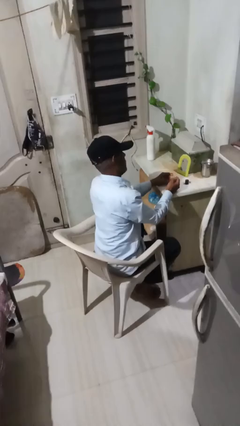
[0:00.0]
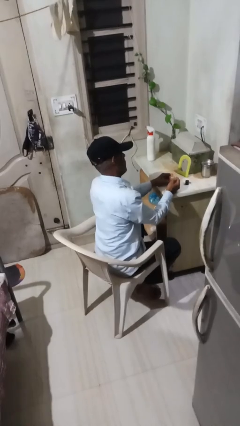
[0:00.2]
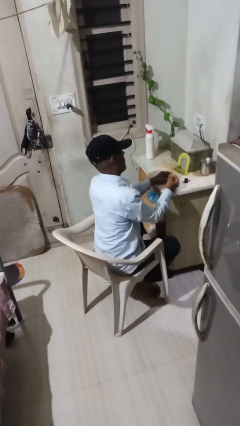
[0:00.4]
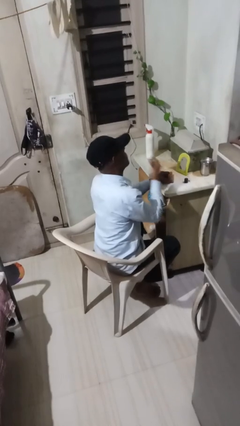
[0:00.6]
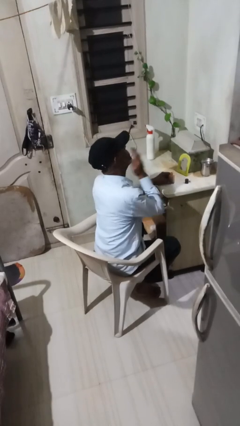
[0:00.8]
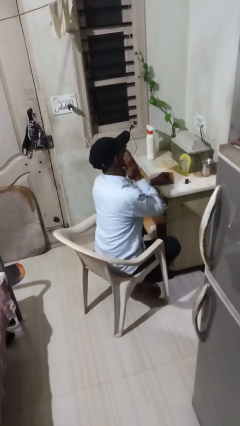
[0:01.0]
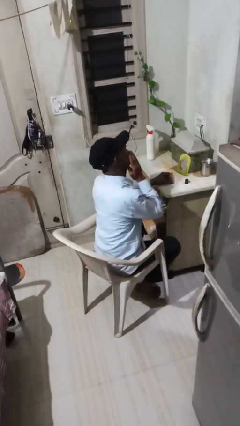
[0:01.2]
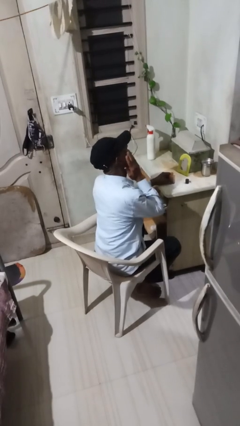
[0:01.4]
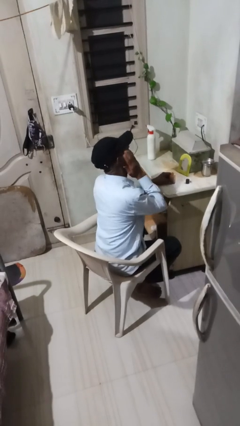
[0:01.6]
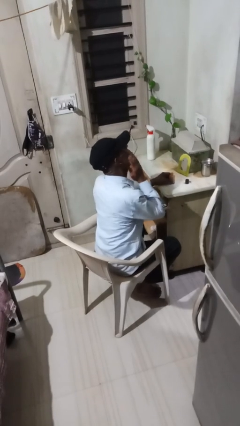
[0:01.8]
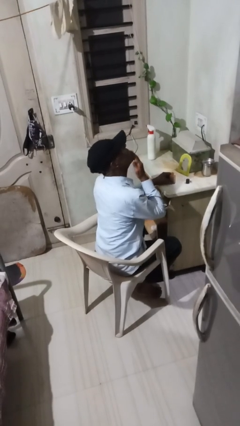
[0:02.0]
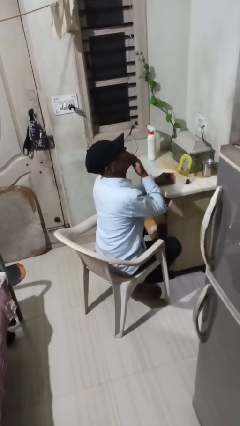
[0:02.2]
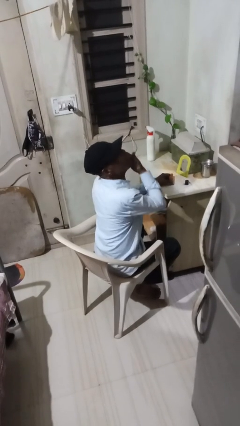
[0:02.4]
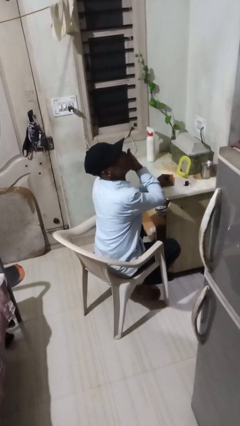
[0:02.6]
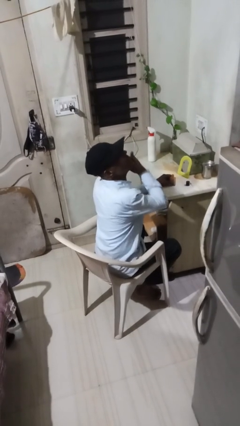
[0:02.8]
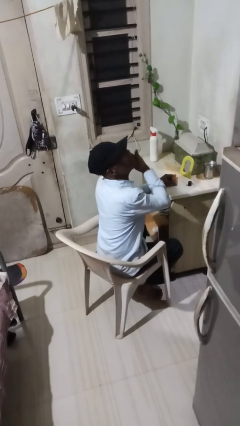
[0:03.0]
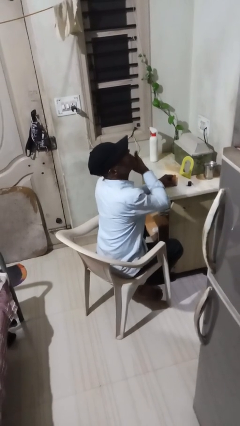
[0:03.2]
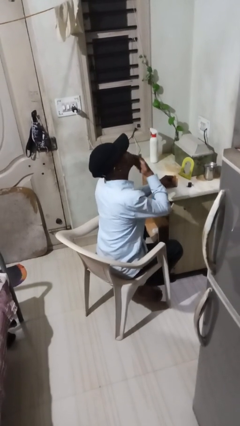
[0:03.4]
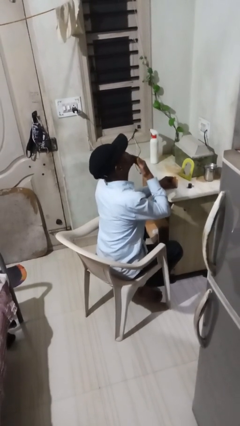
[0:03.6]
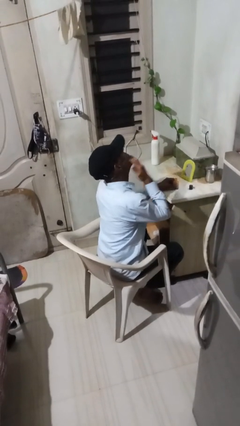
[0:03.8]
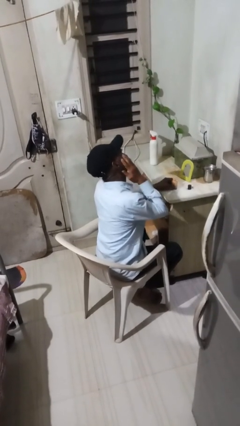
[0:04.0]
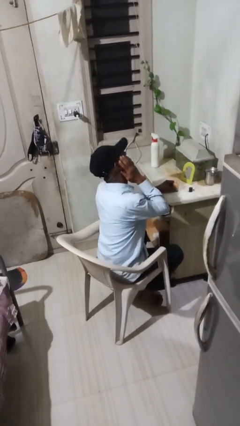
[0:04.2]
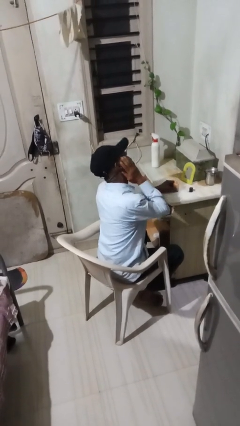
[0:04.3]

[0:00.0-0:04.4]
person applies foundation makeup

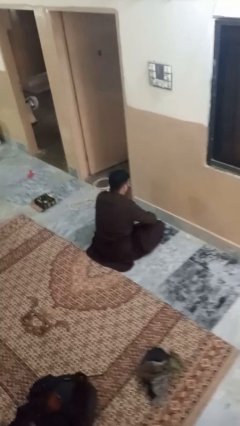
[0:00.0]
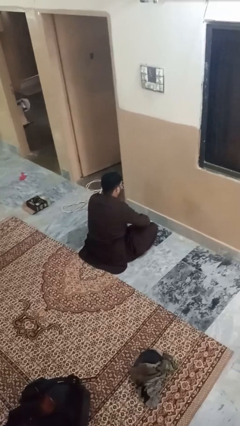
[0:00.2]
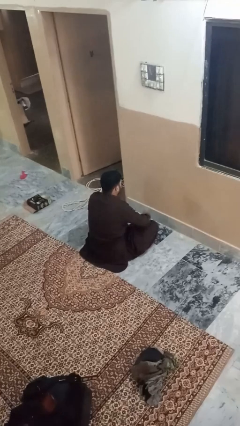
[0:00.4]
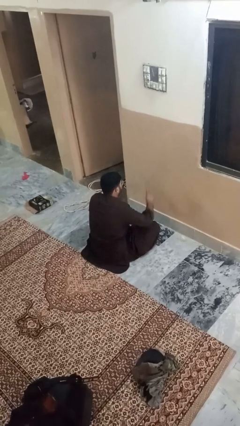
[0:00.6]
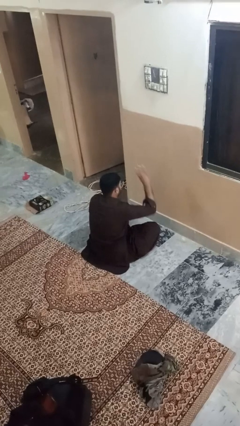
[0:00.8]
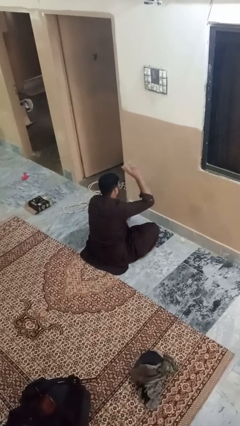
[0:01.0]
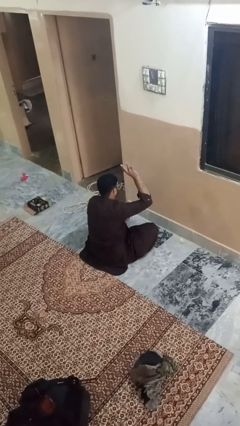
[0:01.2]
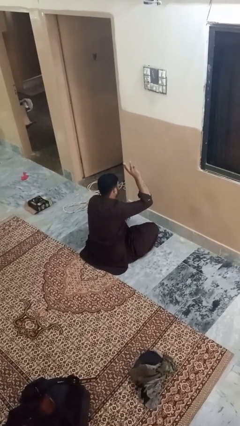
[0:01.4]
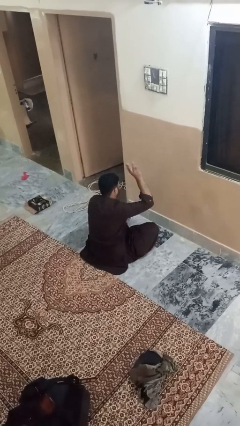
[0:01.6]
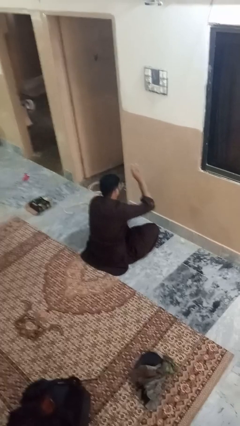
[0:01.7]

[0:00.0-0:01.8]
person gestures number three

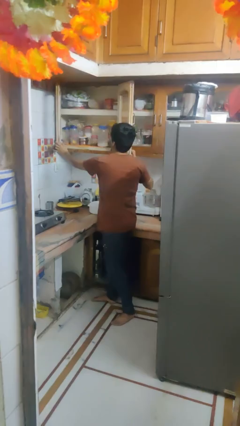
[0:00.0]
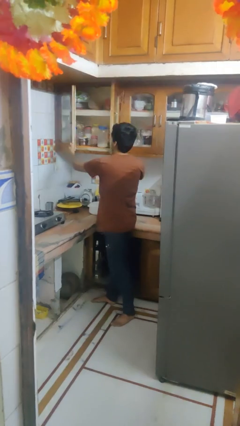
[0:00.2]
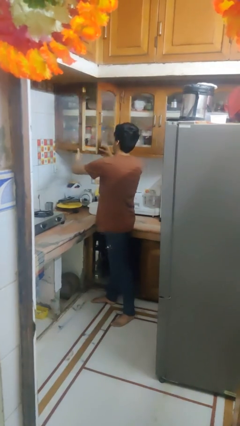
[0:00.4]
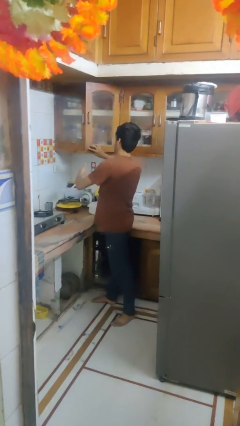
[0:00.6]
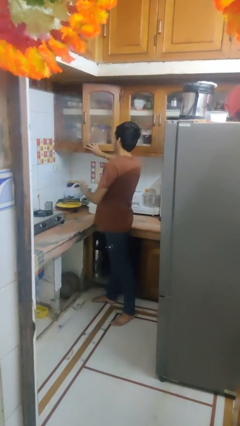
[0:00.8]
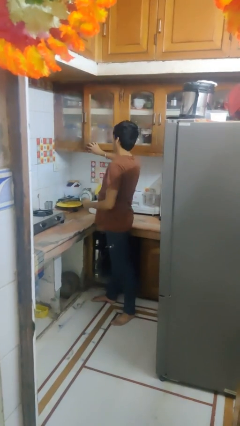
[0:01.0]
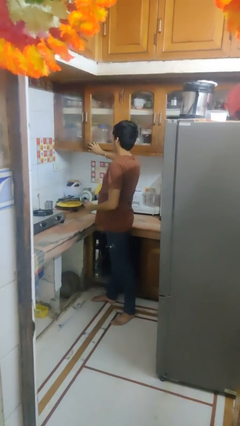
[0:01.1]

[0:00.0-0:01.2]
person closes cabinet

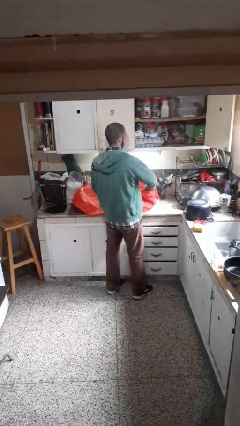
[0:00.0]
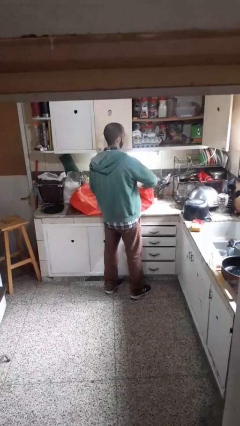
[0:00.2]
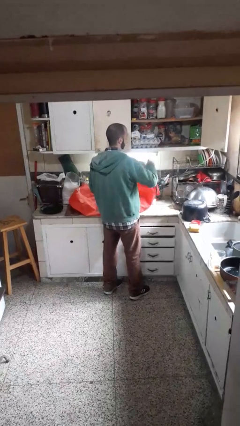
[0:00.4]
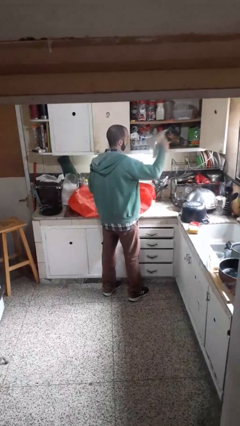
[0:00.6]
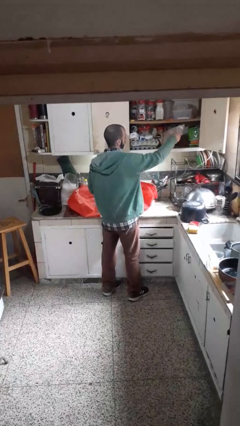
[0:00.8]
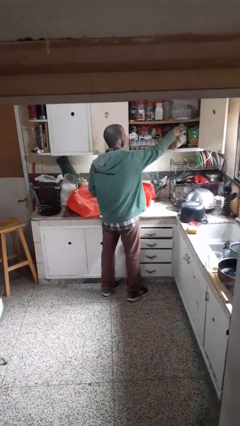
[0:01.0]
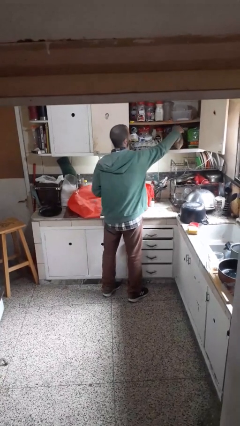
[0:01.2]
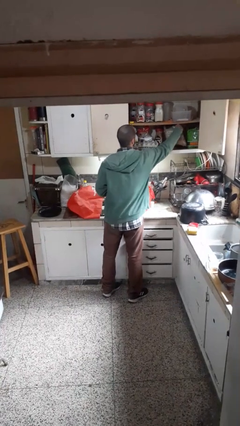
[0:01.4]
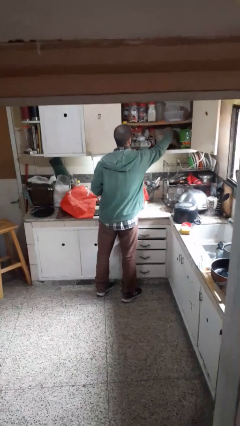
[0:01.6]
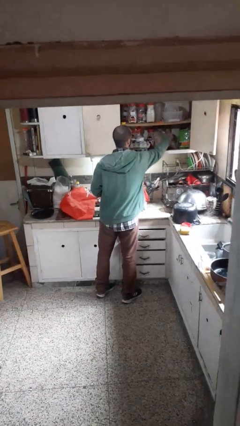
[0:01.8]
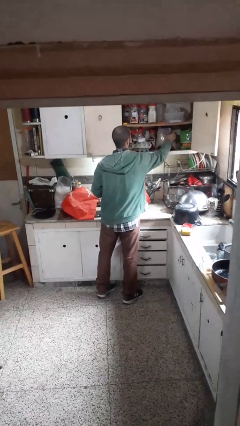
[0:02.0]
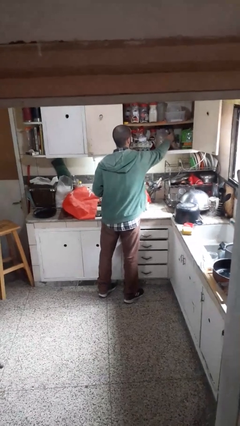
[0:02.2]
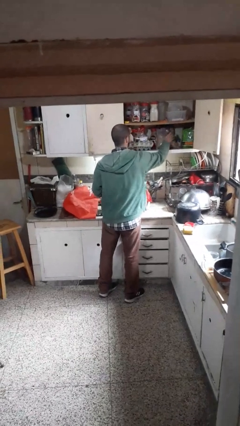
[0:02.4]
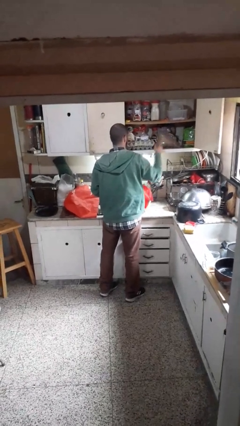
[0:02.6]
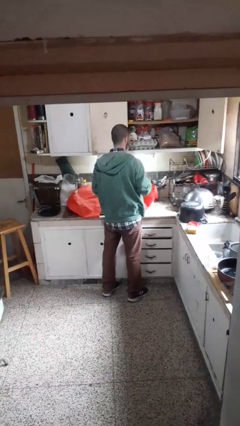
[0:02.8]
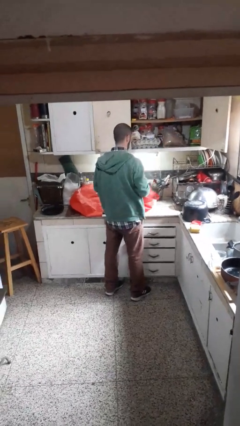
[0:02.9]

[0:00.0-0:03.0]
person loads groceries into cabinet

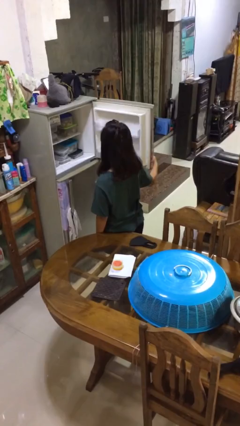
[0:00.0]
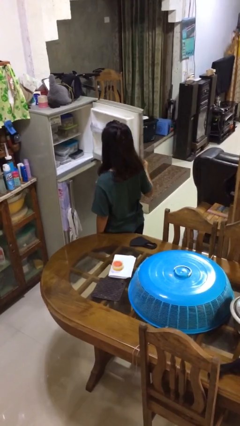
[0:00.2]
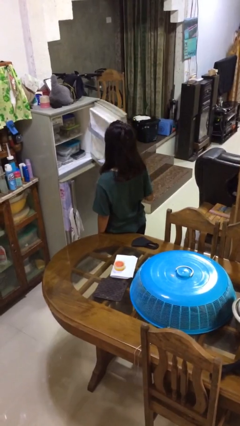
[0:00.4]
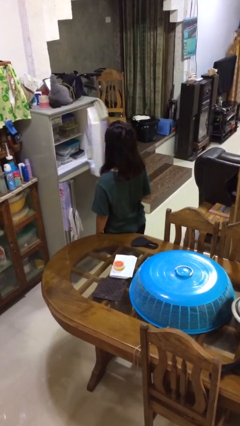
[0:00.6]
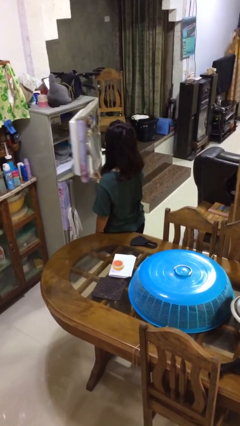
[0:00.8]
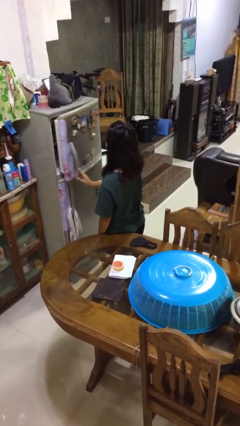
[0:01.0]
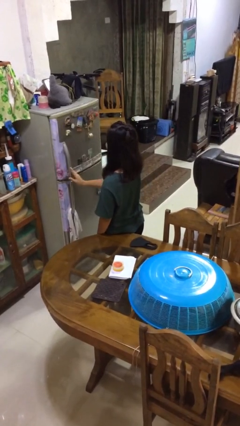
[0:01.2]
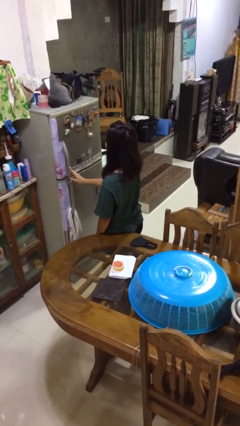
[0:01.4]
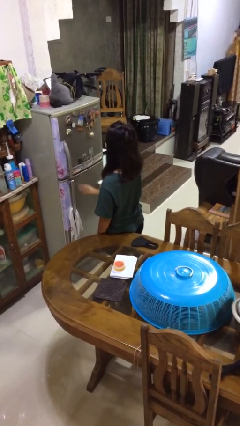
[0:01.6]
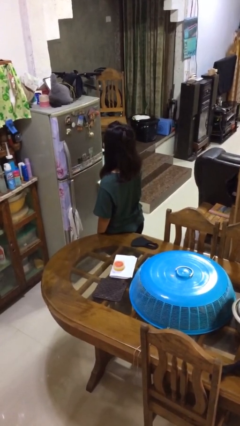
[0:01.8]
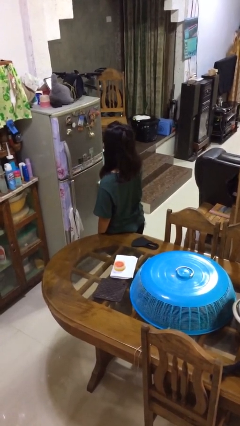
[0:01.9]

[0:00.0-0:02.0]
person closes refrigerator

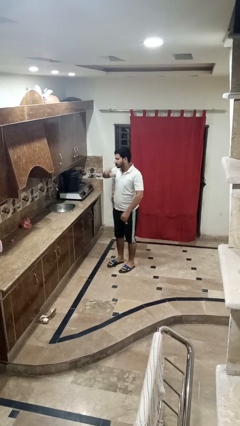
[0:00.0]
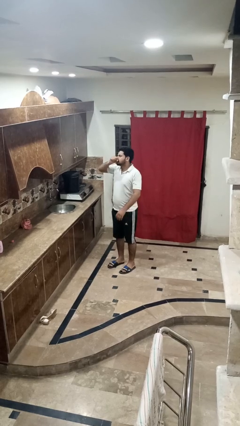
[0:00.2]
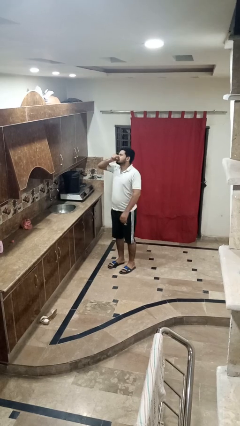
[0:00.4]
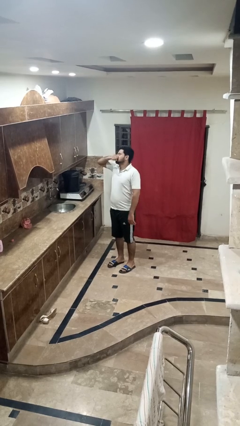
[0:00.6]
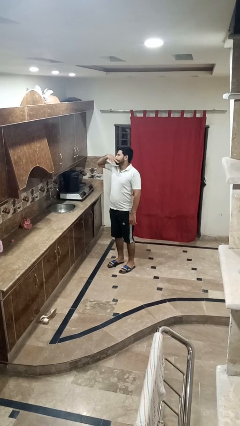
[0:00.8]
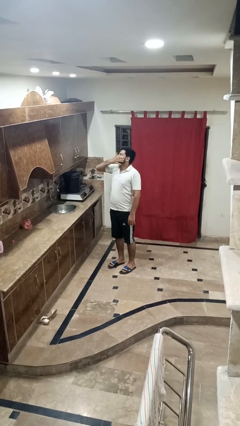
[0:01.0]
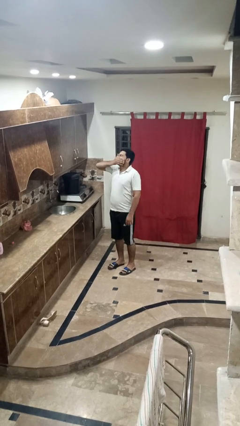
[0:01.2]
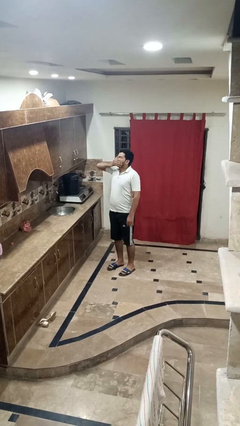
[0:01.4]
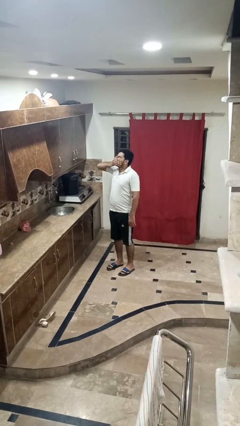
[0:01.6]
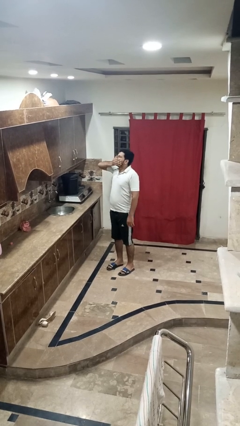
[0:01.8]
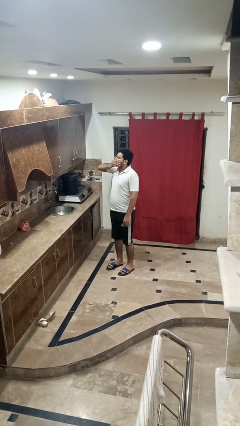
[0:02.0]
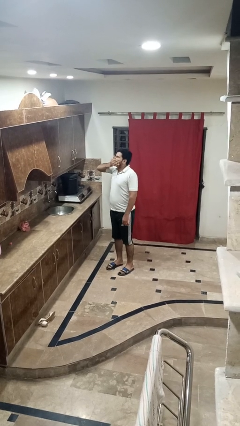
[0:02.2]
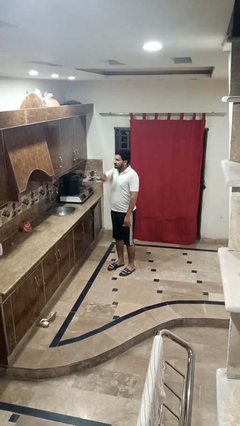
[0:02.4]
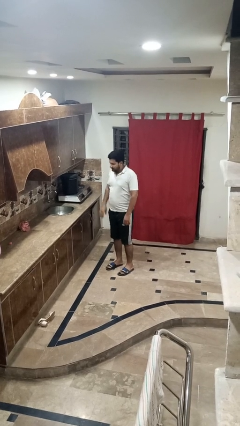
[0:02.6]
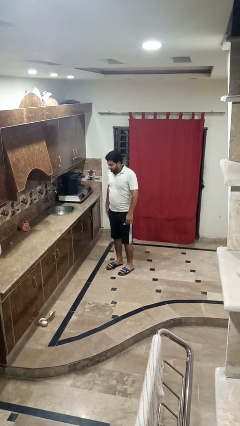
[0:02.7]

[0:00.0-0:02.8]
person sneezes into hand

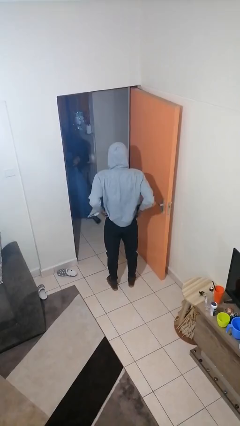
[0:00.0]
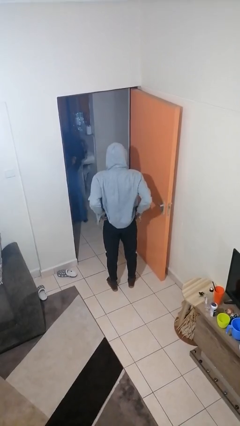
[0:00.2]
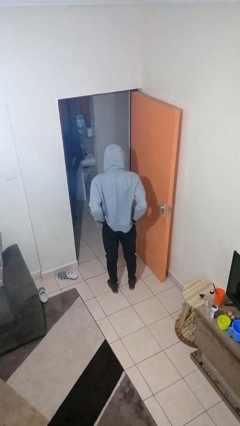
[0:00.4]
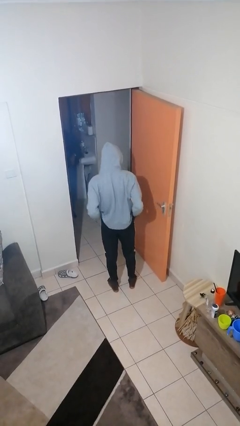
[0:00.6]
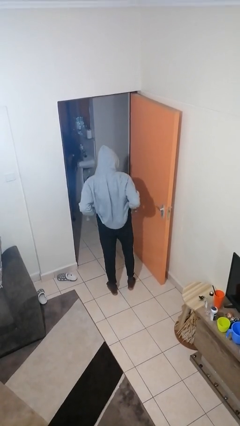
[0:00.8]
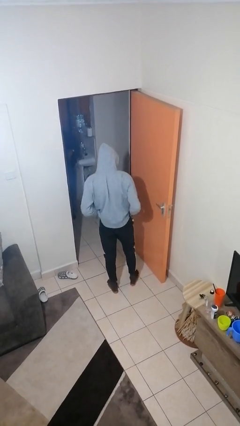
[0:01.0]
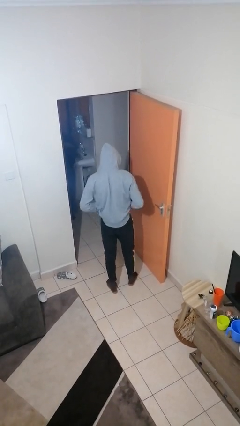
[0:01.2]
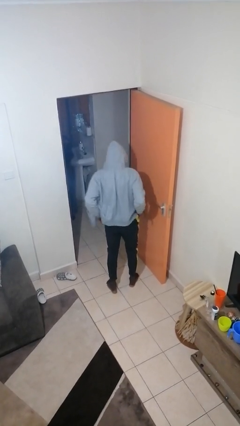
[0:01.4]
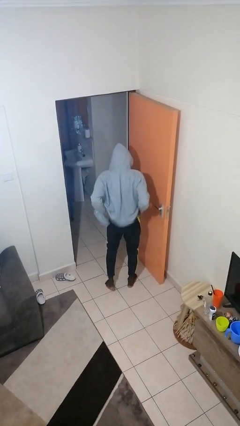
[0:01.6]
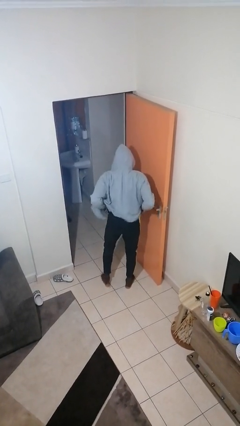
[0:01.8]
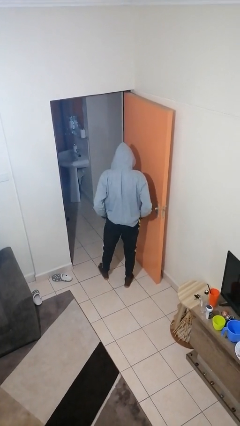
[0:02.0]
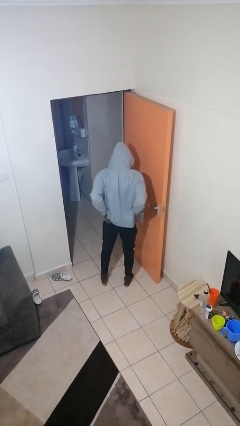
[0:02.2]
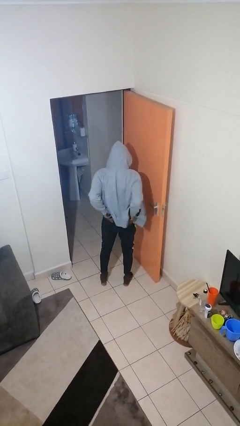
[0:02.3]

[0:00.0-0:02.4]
person hikes up pants
